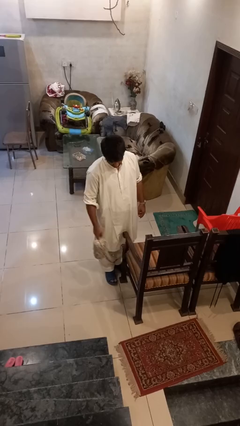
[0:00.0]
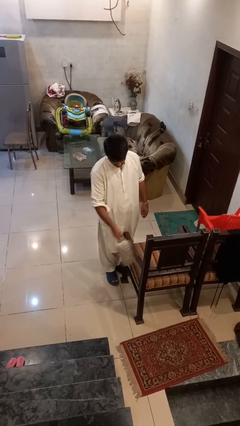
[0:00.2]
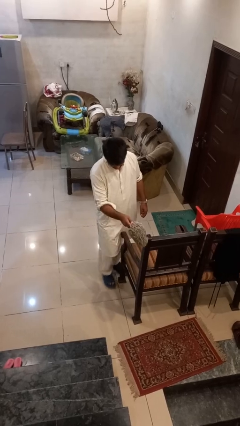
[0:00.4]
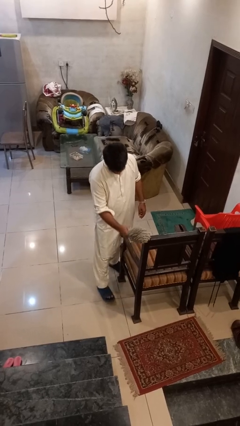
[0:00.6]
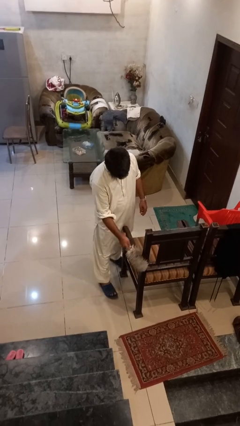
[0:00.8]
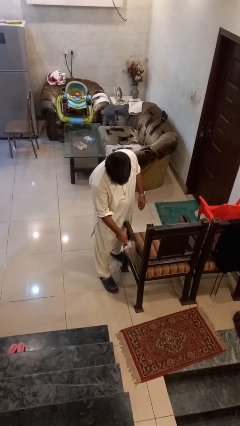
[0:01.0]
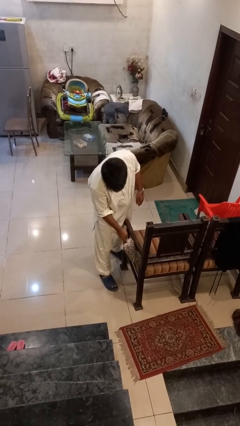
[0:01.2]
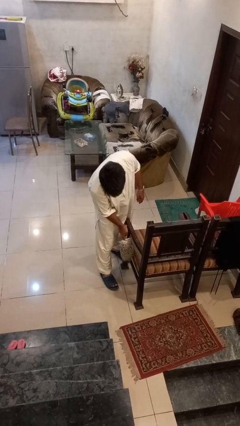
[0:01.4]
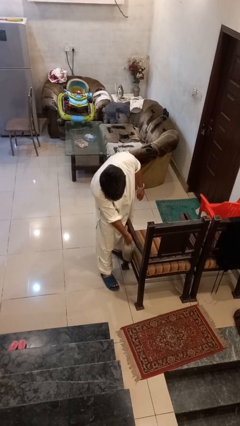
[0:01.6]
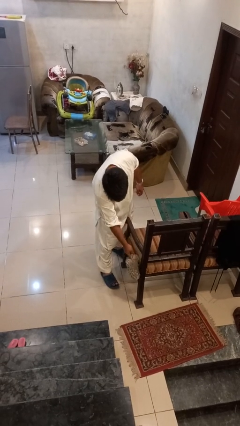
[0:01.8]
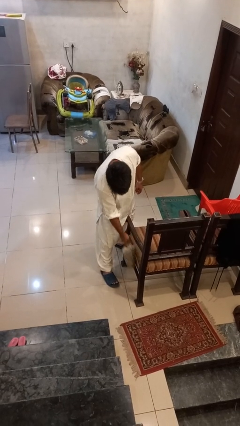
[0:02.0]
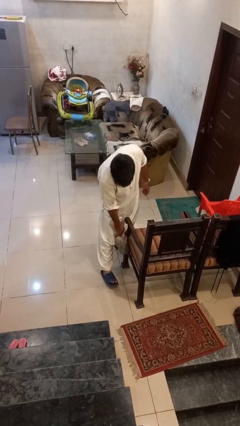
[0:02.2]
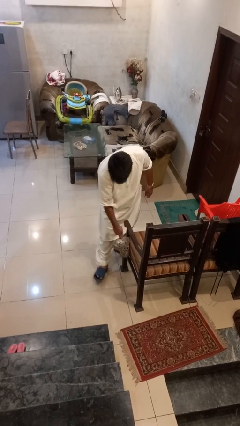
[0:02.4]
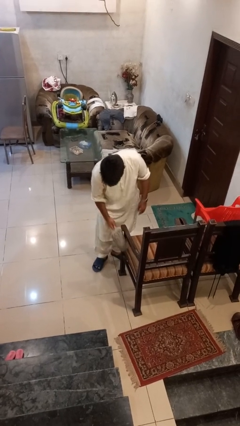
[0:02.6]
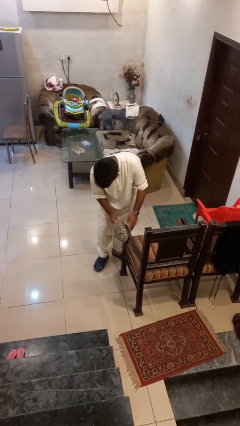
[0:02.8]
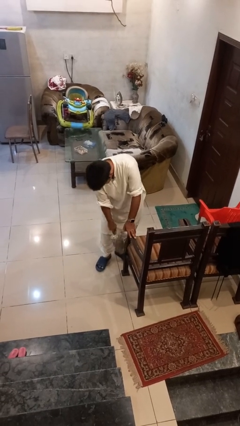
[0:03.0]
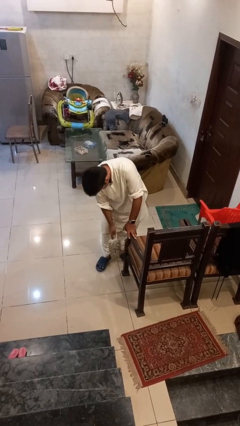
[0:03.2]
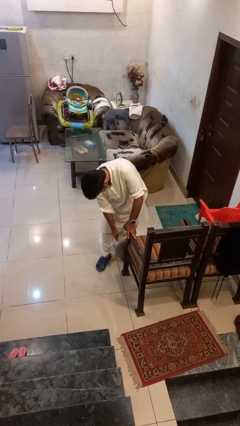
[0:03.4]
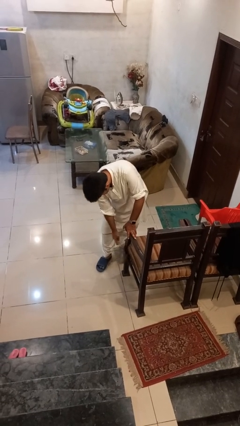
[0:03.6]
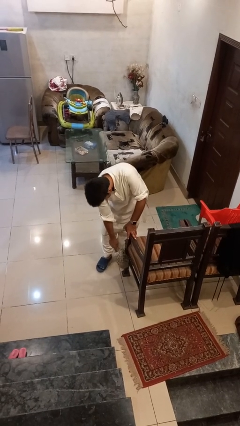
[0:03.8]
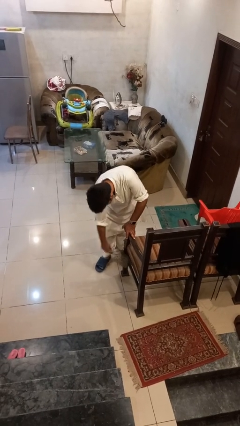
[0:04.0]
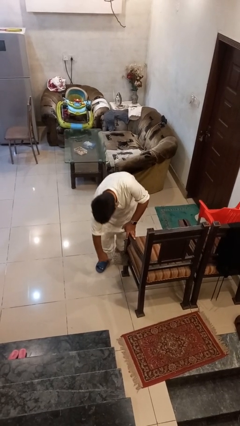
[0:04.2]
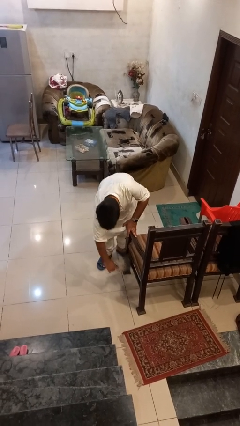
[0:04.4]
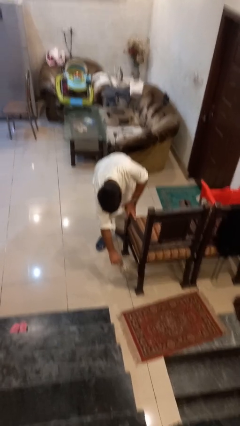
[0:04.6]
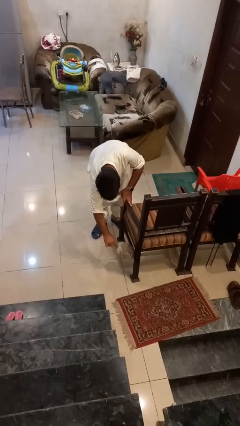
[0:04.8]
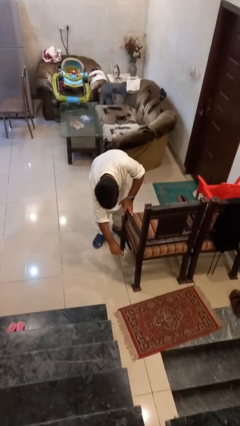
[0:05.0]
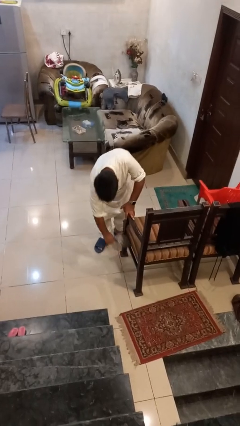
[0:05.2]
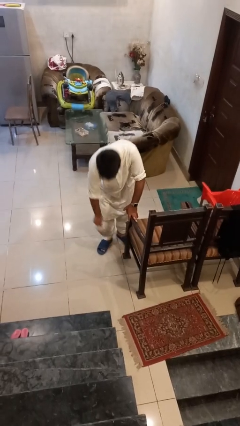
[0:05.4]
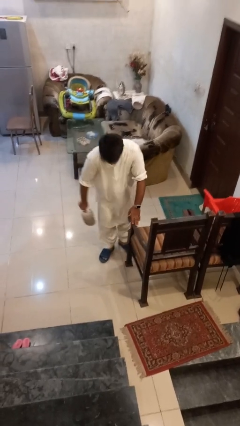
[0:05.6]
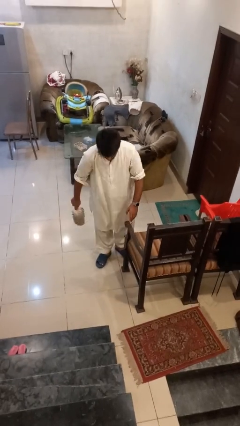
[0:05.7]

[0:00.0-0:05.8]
person dusts furniture

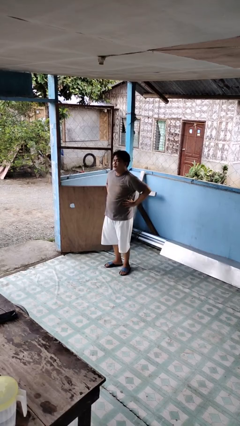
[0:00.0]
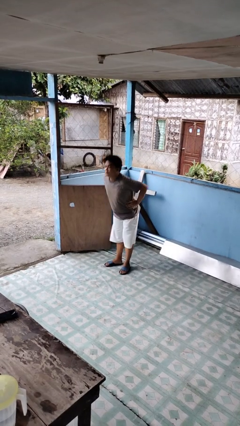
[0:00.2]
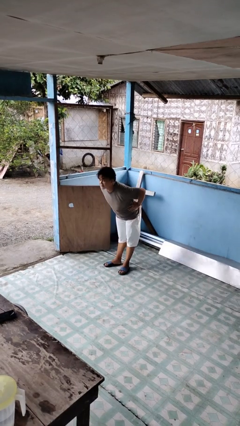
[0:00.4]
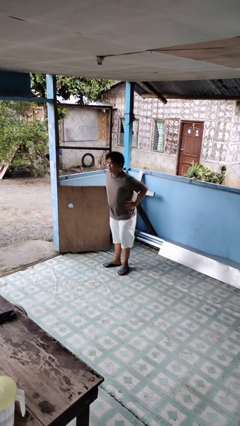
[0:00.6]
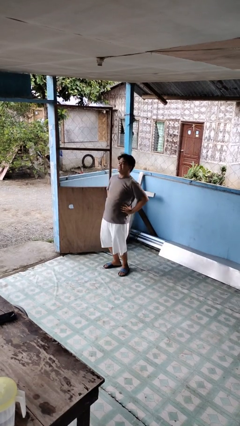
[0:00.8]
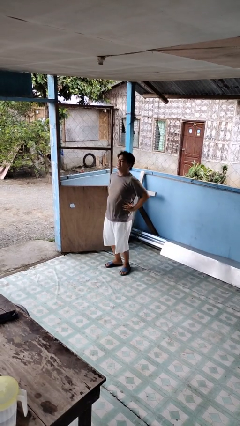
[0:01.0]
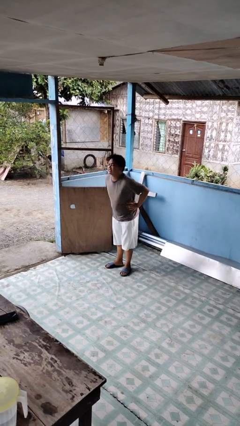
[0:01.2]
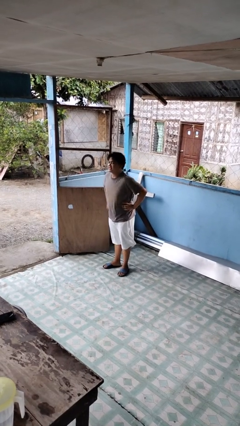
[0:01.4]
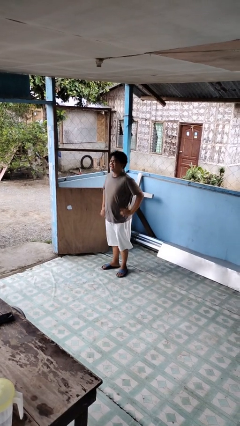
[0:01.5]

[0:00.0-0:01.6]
person wiggles hips

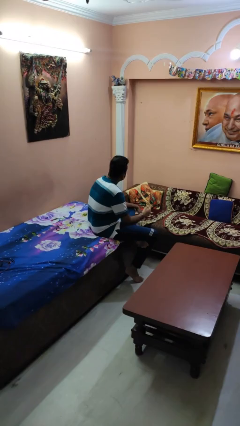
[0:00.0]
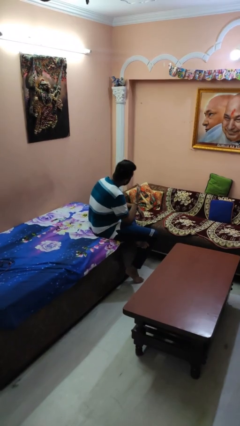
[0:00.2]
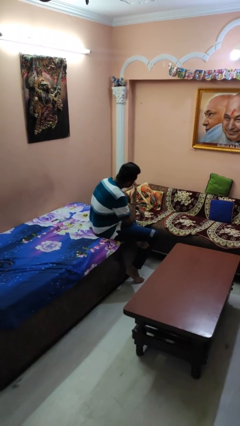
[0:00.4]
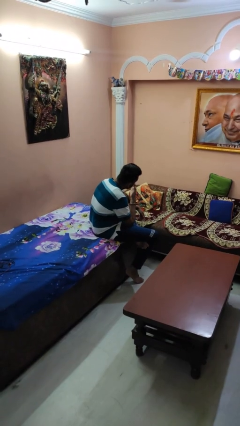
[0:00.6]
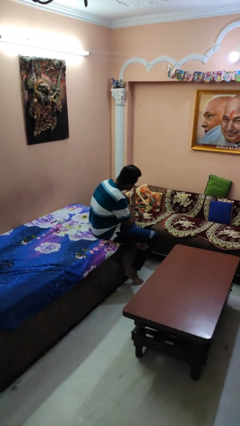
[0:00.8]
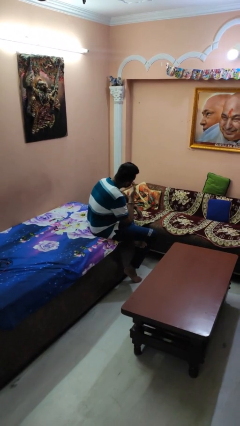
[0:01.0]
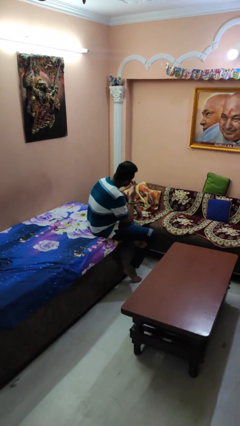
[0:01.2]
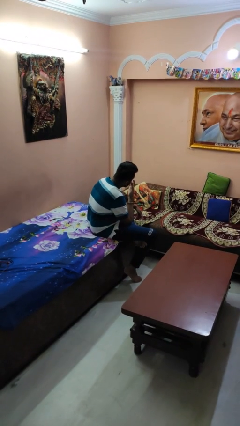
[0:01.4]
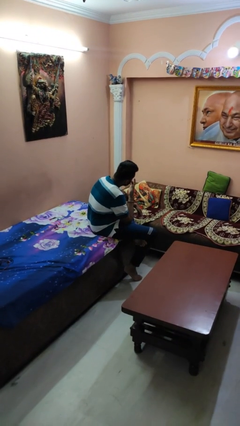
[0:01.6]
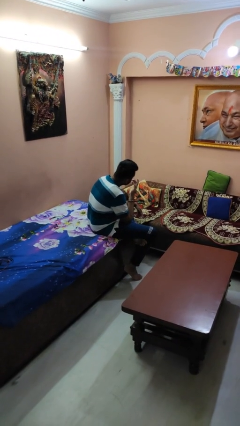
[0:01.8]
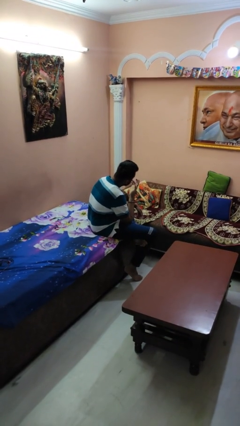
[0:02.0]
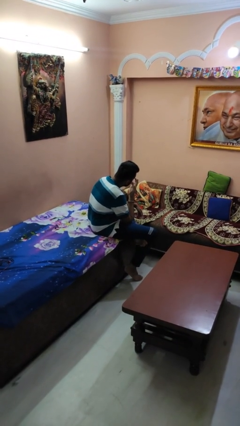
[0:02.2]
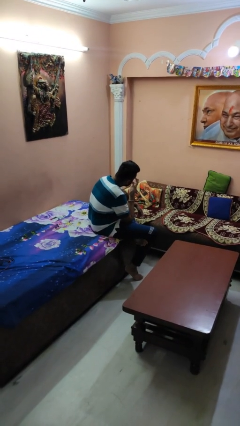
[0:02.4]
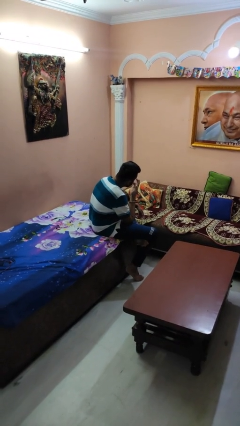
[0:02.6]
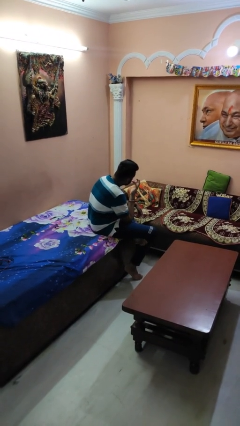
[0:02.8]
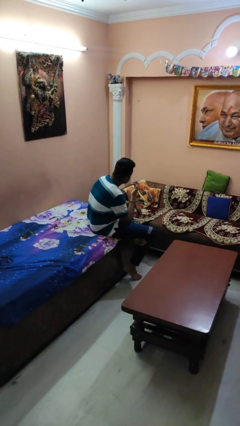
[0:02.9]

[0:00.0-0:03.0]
person licks fingers

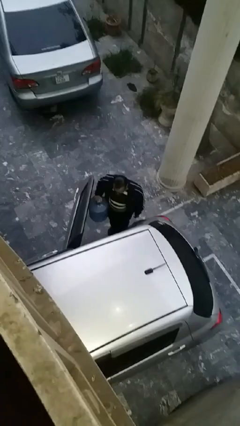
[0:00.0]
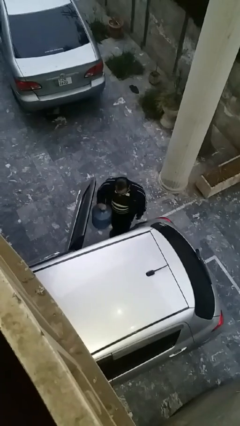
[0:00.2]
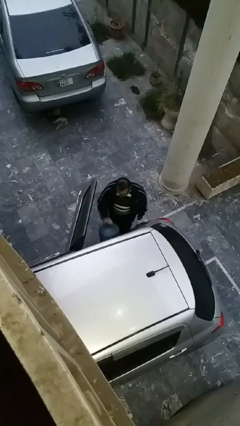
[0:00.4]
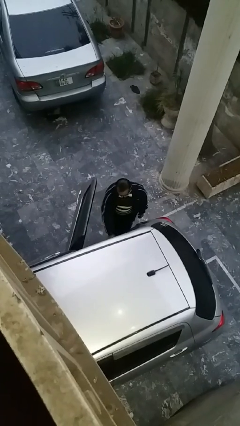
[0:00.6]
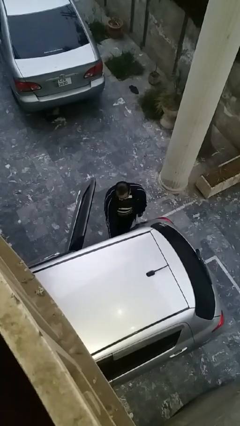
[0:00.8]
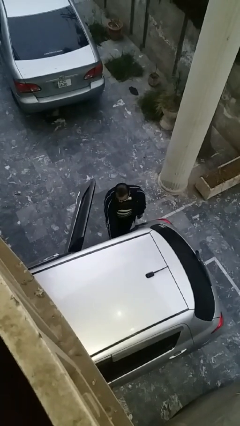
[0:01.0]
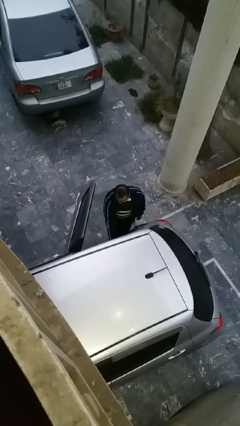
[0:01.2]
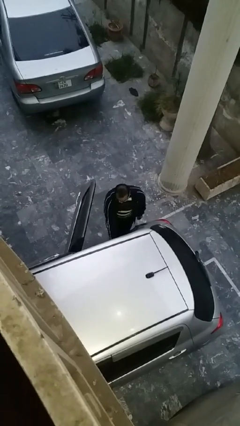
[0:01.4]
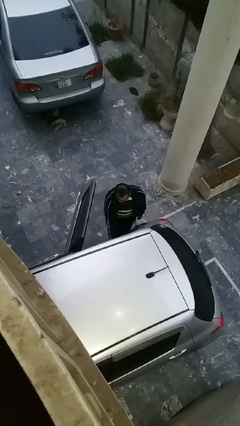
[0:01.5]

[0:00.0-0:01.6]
person loads car

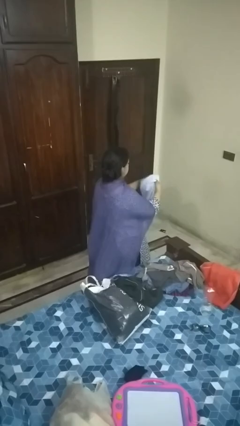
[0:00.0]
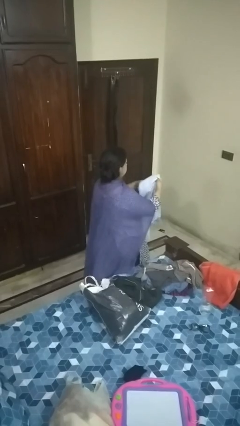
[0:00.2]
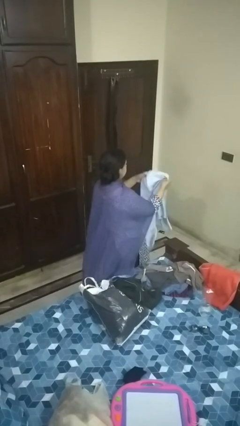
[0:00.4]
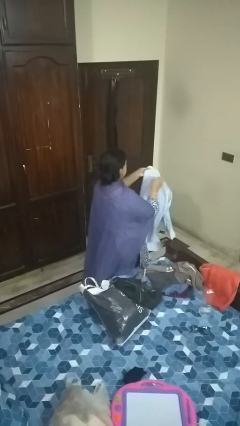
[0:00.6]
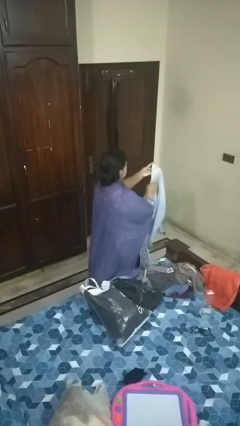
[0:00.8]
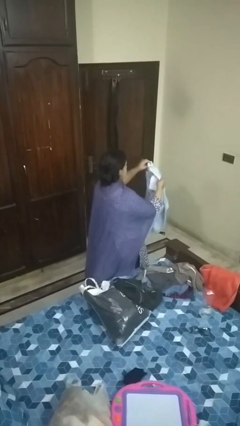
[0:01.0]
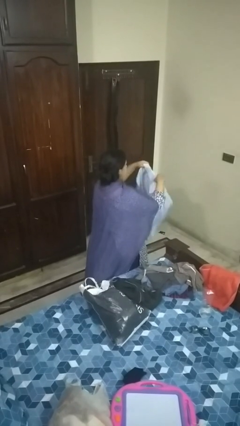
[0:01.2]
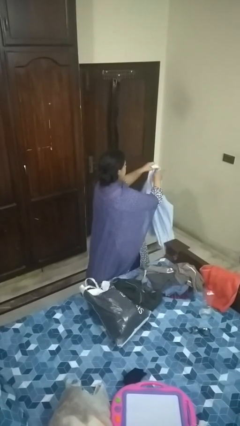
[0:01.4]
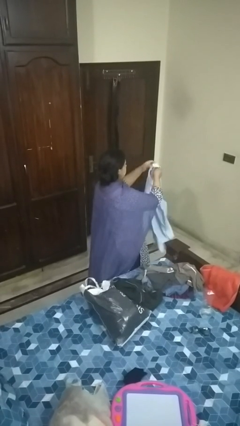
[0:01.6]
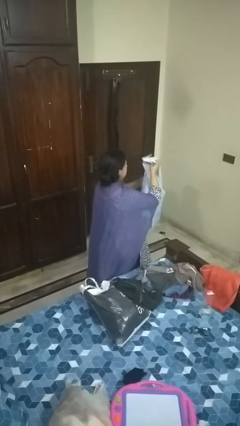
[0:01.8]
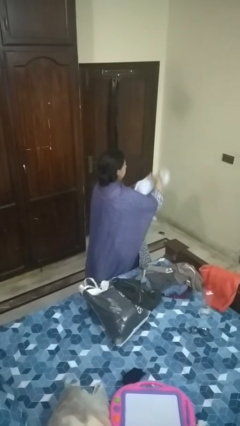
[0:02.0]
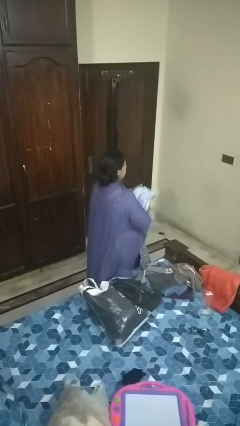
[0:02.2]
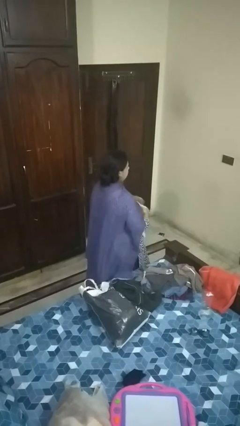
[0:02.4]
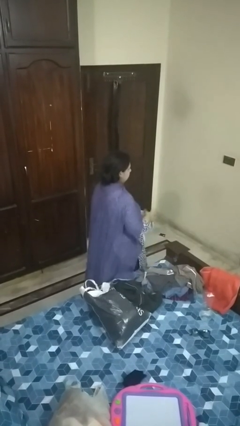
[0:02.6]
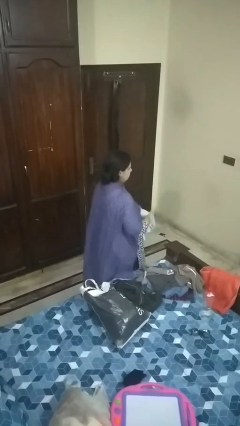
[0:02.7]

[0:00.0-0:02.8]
person folds shirt

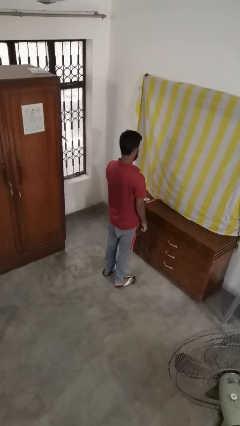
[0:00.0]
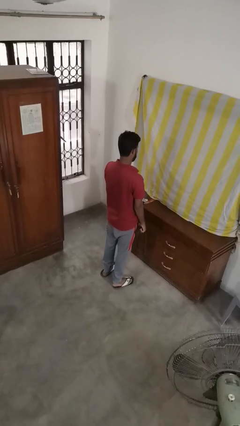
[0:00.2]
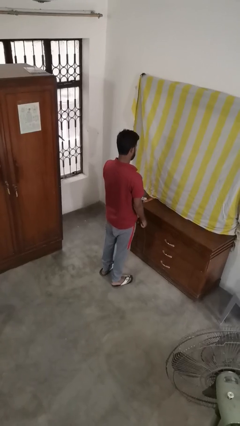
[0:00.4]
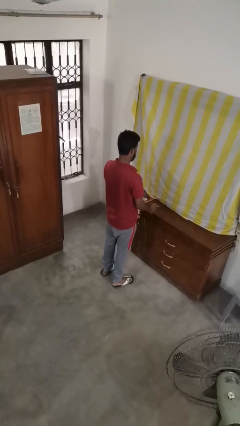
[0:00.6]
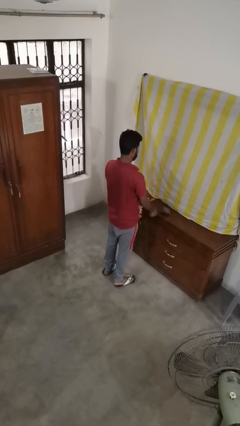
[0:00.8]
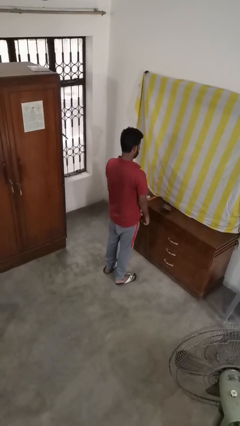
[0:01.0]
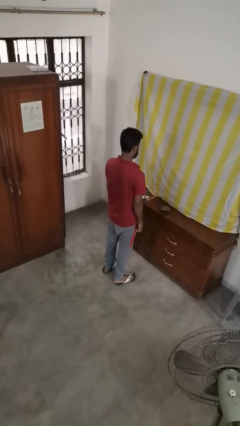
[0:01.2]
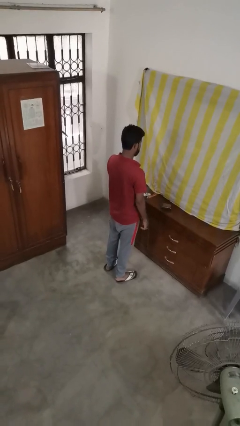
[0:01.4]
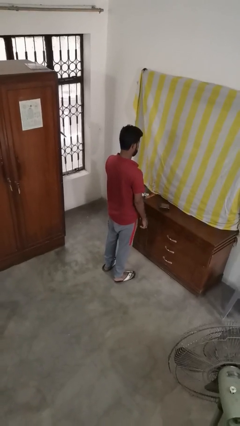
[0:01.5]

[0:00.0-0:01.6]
person throws object on table

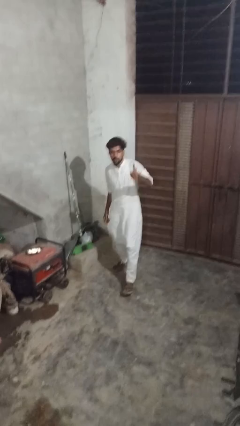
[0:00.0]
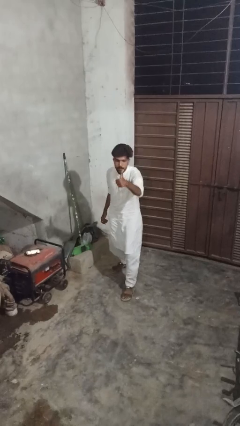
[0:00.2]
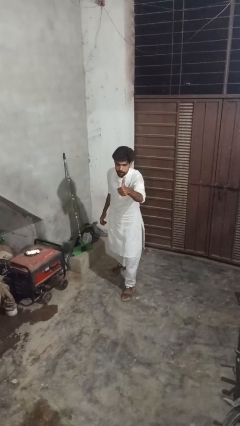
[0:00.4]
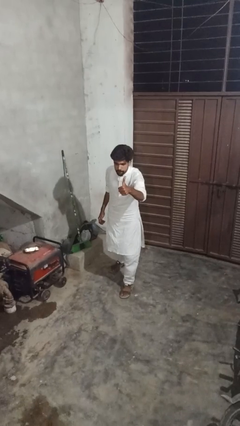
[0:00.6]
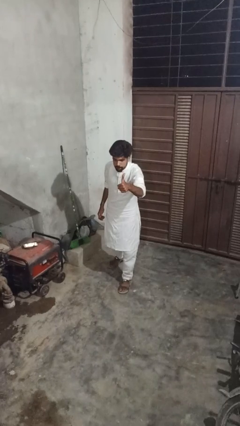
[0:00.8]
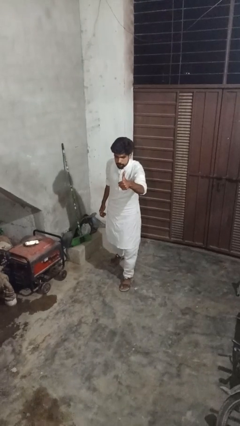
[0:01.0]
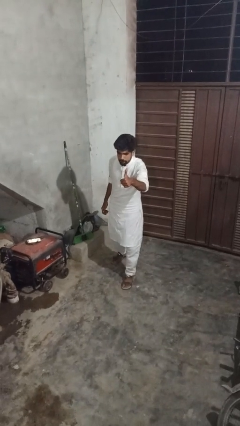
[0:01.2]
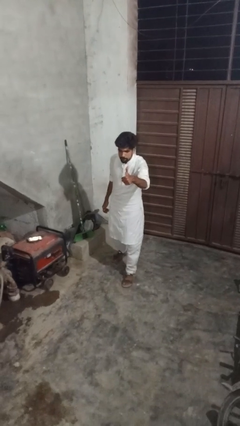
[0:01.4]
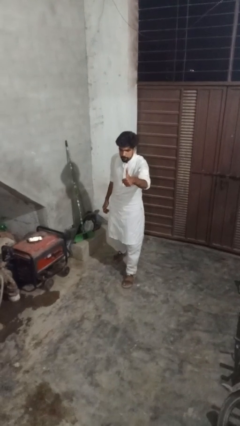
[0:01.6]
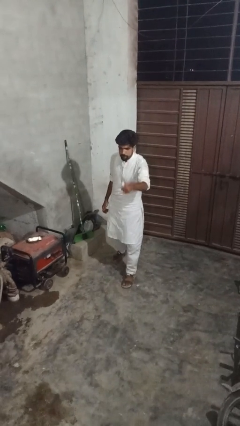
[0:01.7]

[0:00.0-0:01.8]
person gestures thumbs up
